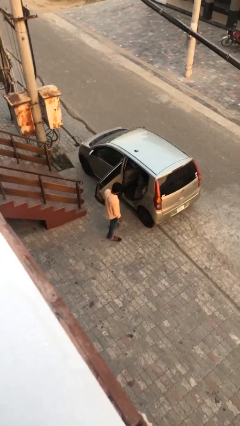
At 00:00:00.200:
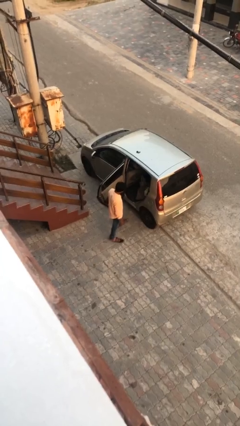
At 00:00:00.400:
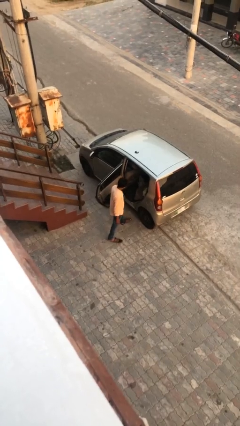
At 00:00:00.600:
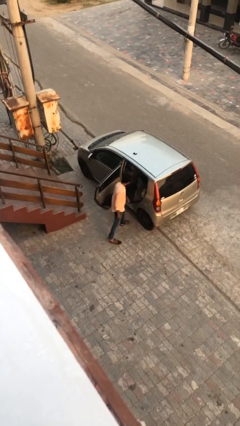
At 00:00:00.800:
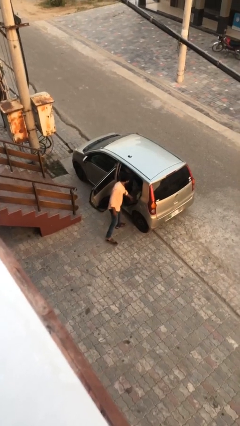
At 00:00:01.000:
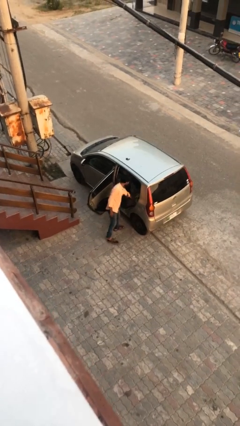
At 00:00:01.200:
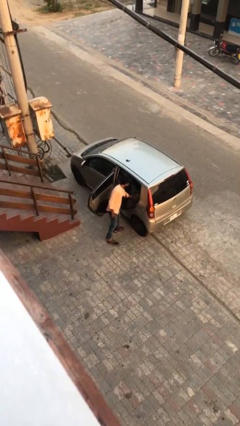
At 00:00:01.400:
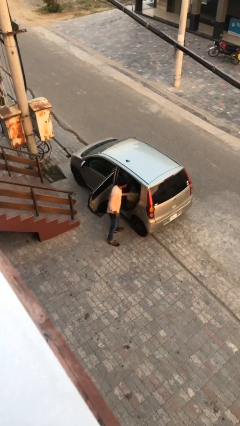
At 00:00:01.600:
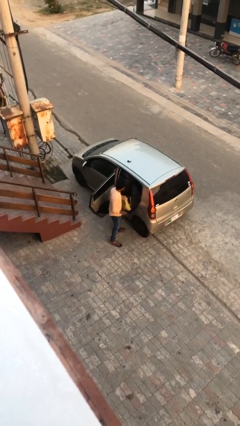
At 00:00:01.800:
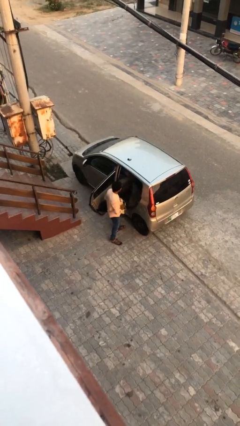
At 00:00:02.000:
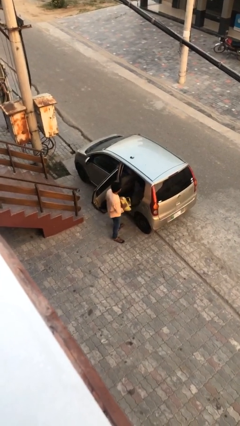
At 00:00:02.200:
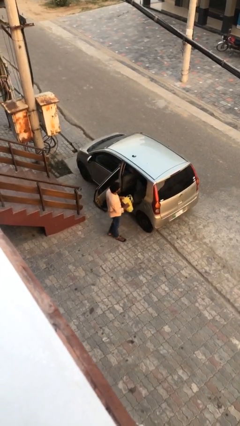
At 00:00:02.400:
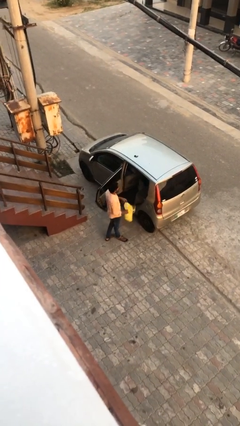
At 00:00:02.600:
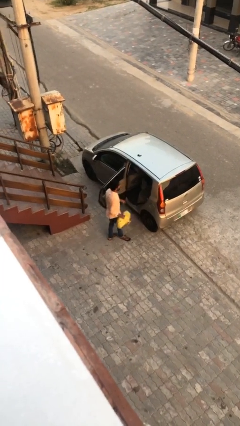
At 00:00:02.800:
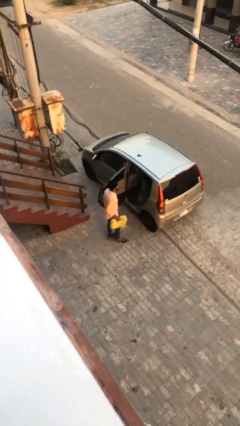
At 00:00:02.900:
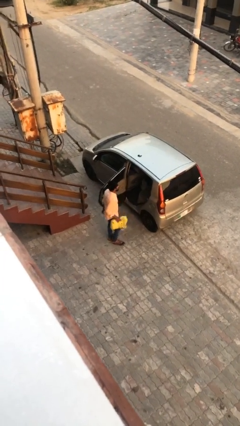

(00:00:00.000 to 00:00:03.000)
person unloads car

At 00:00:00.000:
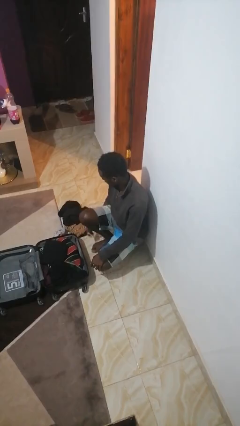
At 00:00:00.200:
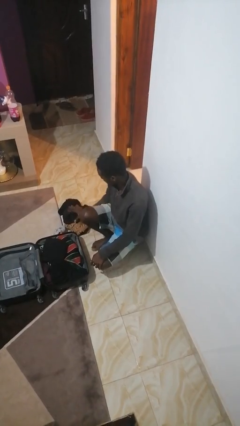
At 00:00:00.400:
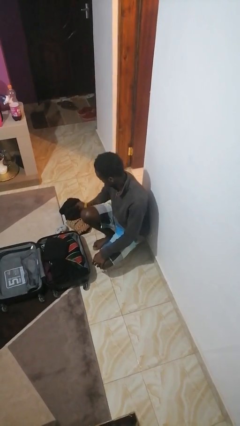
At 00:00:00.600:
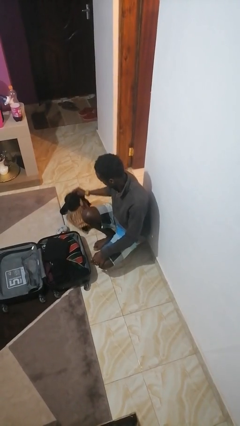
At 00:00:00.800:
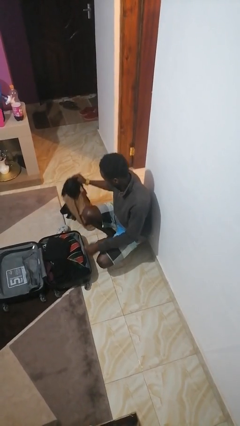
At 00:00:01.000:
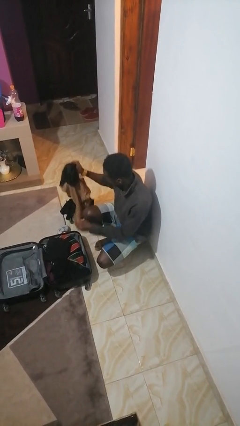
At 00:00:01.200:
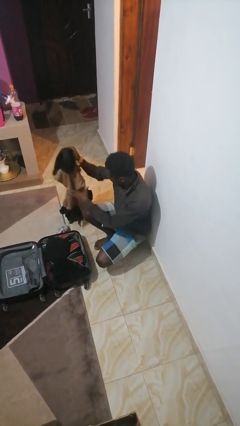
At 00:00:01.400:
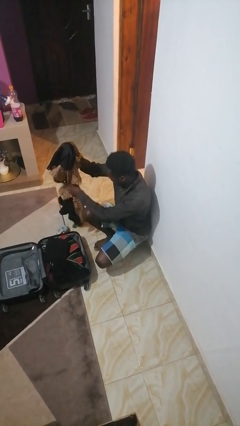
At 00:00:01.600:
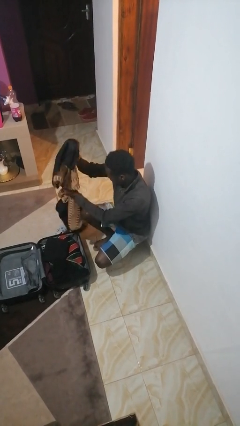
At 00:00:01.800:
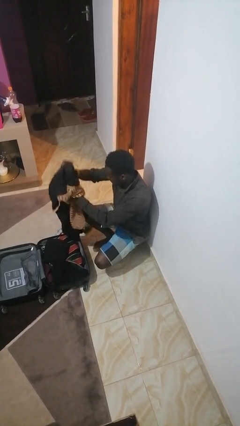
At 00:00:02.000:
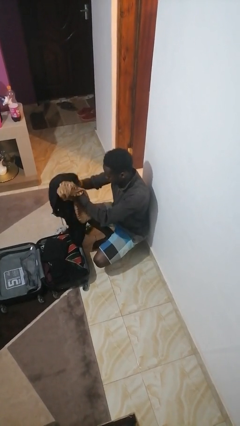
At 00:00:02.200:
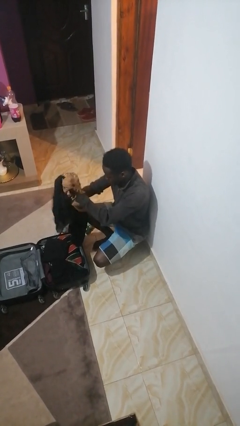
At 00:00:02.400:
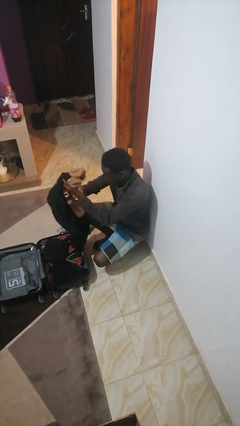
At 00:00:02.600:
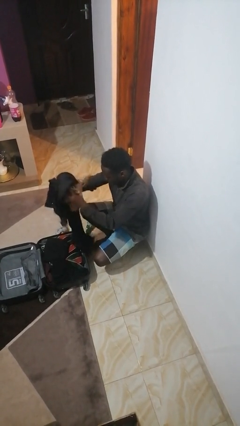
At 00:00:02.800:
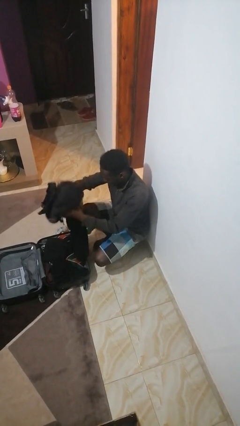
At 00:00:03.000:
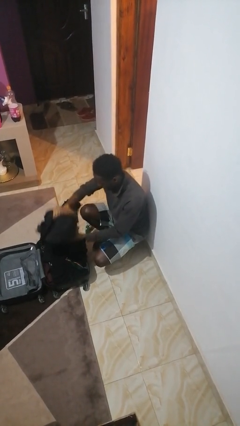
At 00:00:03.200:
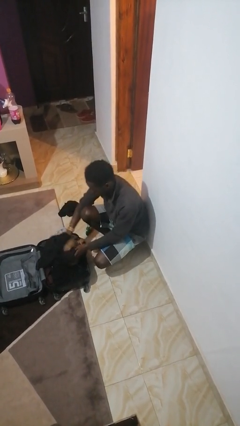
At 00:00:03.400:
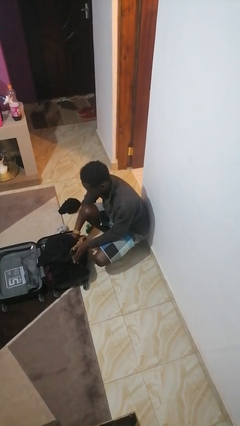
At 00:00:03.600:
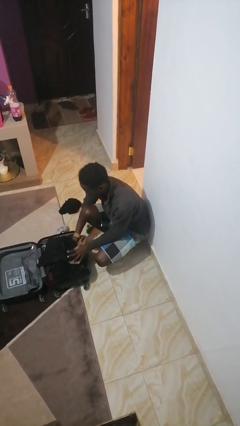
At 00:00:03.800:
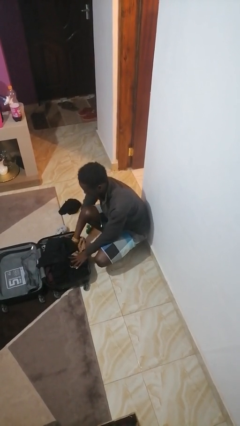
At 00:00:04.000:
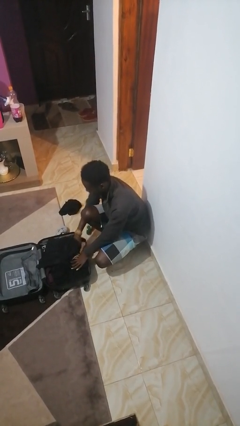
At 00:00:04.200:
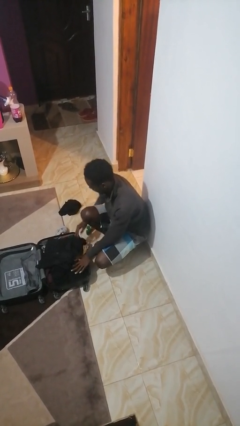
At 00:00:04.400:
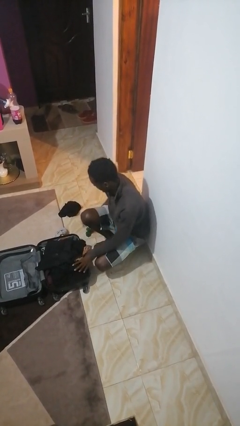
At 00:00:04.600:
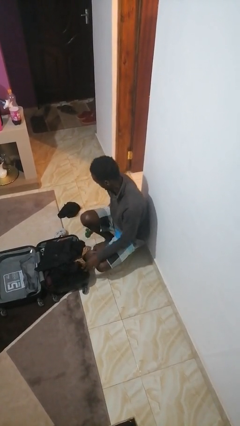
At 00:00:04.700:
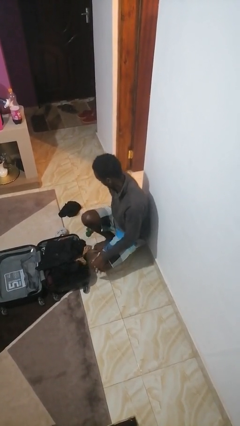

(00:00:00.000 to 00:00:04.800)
person loads clothes into suitcase

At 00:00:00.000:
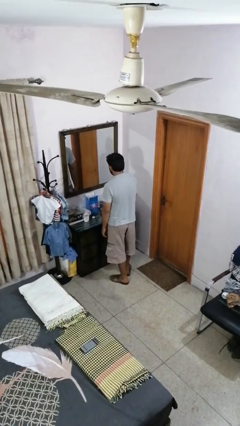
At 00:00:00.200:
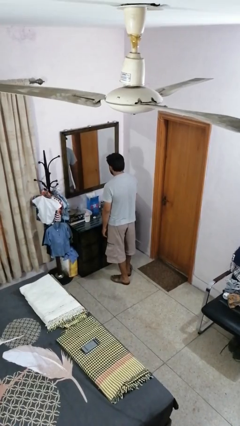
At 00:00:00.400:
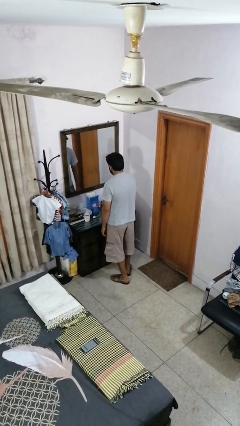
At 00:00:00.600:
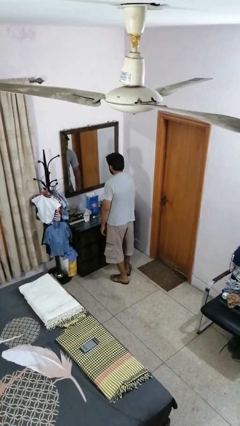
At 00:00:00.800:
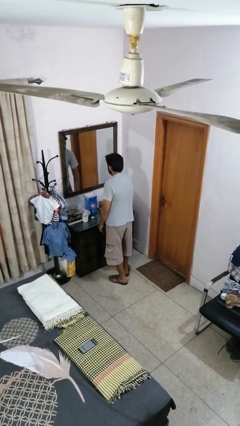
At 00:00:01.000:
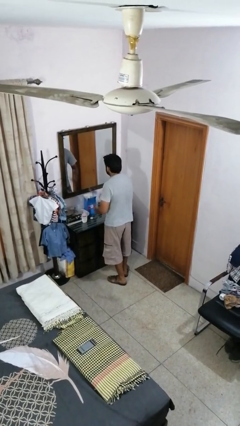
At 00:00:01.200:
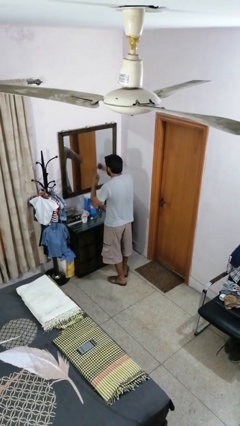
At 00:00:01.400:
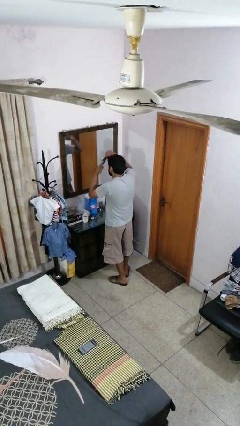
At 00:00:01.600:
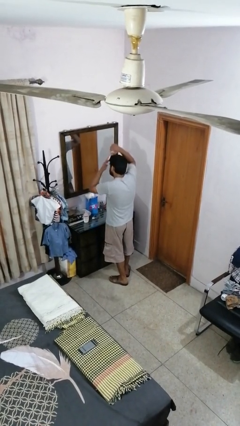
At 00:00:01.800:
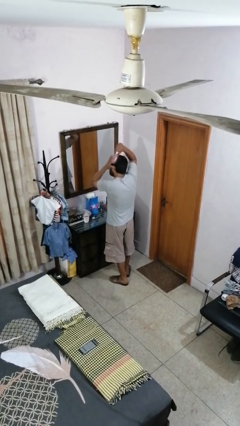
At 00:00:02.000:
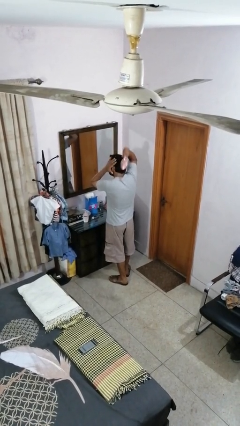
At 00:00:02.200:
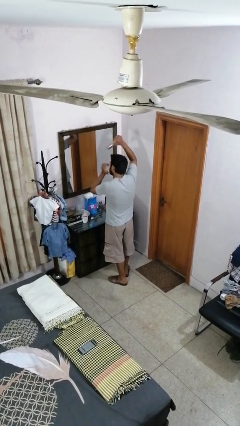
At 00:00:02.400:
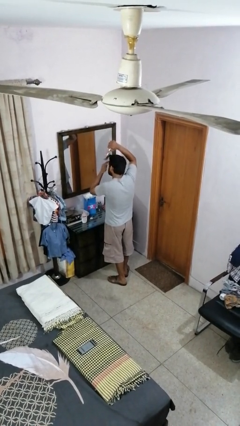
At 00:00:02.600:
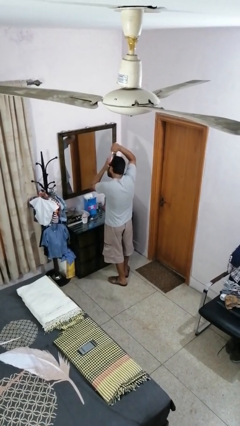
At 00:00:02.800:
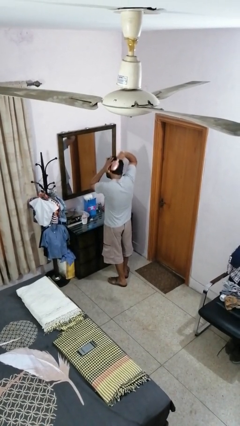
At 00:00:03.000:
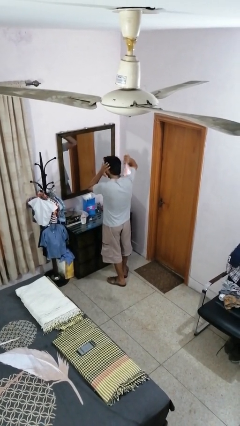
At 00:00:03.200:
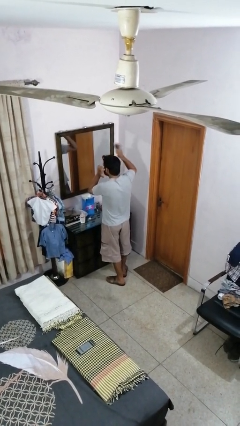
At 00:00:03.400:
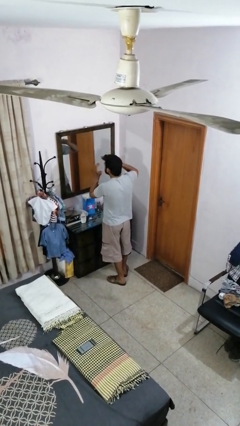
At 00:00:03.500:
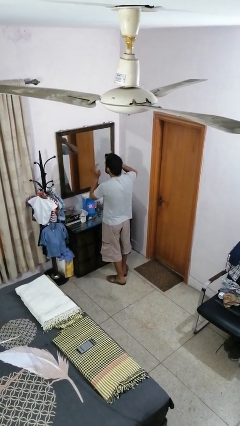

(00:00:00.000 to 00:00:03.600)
person brushes hair

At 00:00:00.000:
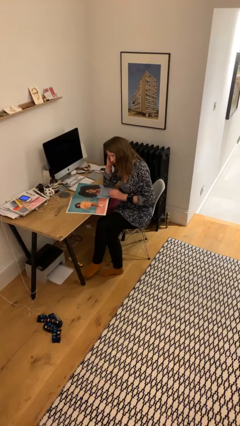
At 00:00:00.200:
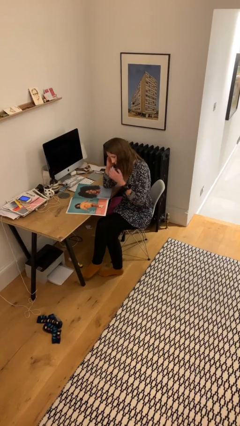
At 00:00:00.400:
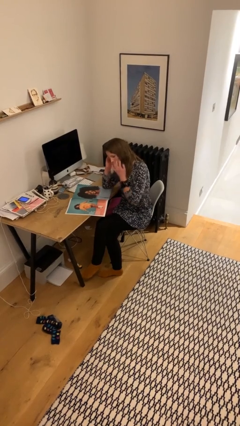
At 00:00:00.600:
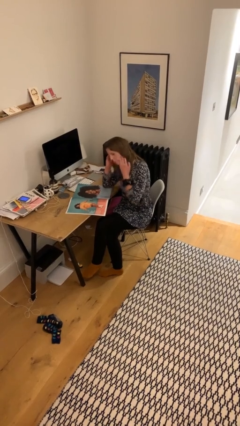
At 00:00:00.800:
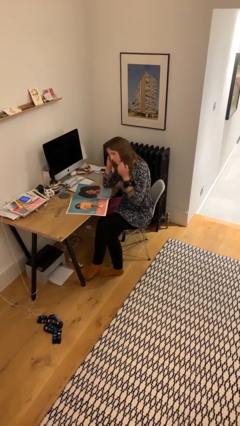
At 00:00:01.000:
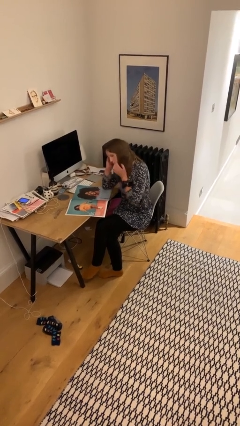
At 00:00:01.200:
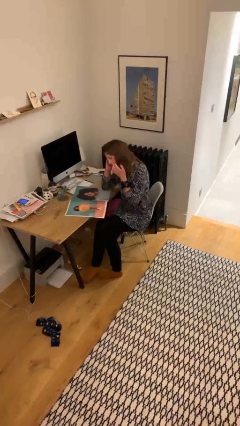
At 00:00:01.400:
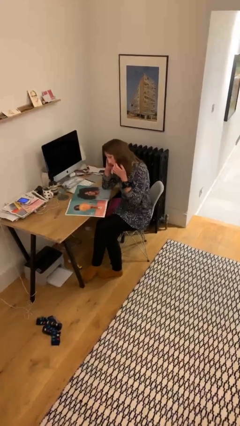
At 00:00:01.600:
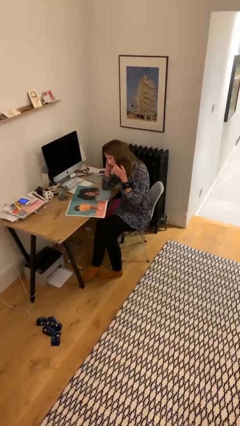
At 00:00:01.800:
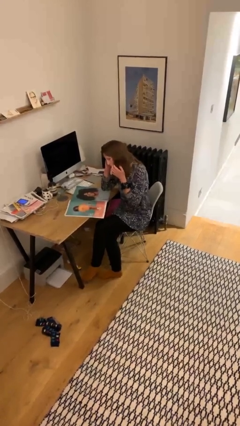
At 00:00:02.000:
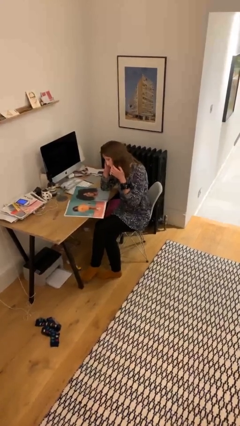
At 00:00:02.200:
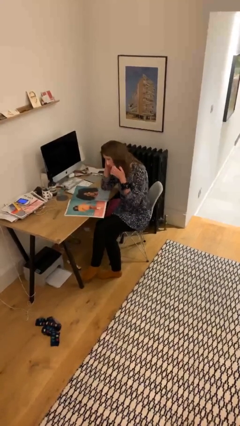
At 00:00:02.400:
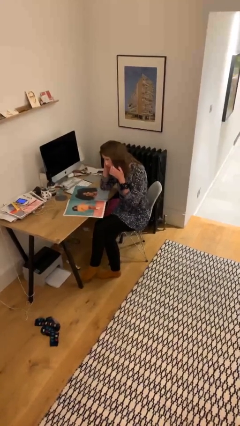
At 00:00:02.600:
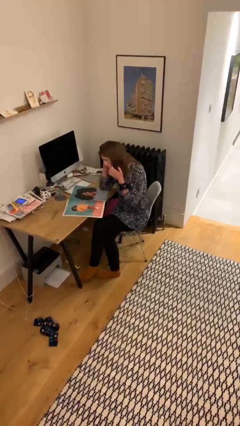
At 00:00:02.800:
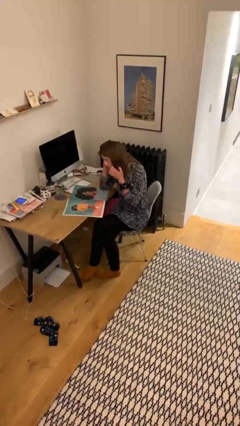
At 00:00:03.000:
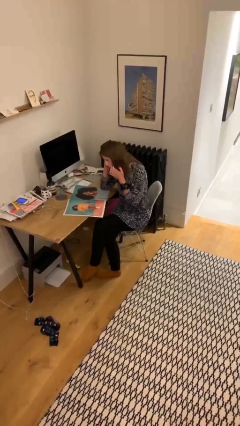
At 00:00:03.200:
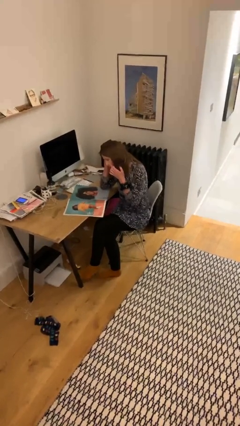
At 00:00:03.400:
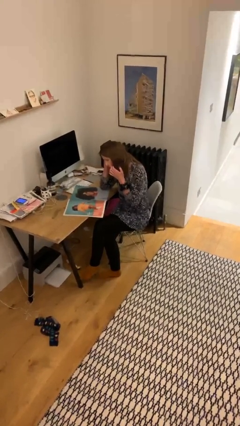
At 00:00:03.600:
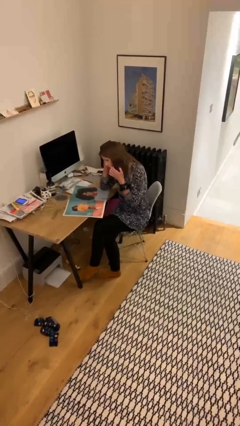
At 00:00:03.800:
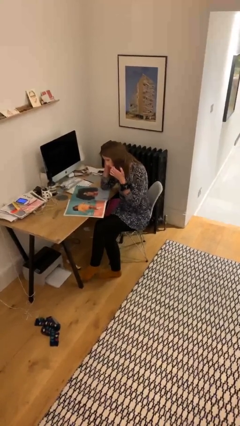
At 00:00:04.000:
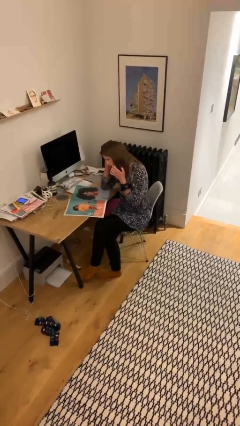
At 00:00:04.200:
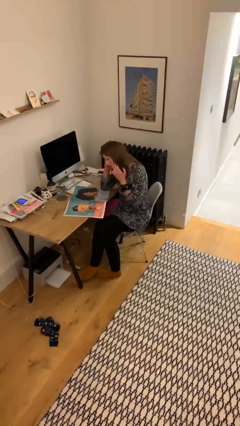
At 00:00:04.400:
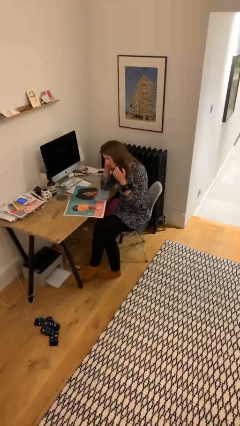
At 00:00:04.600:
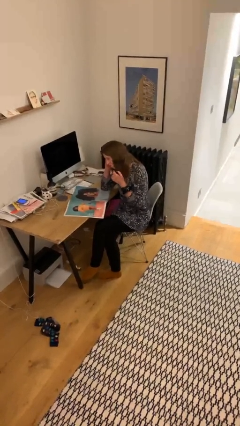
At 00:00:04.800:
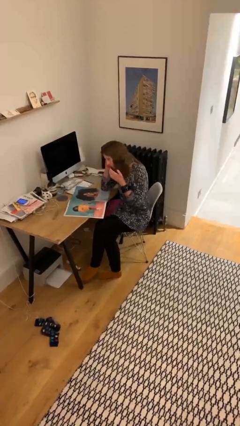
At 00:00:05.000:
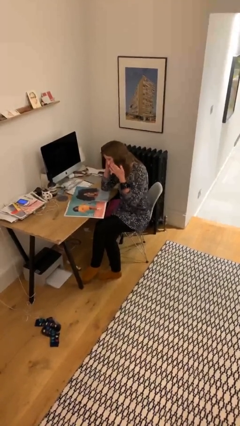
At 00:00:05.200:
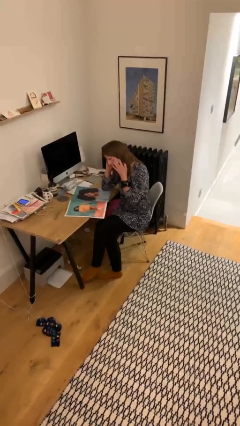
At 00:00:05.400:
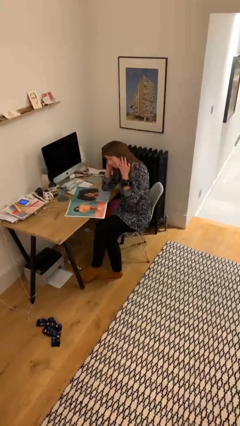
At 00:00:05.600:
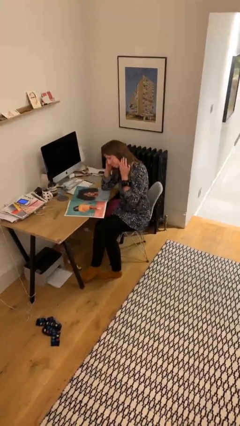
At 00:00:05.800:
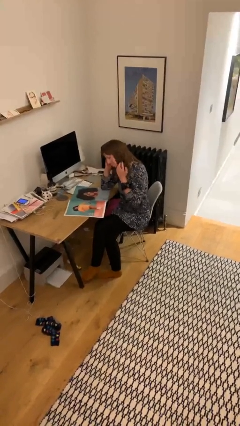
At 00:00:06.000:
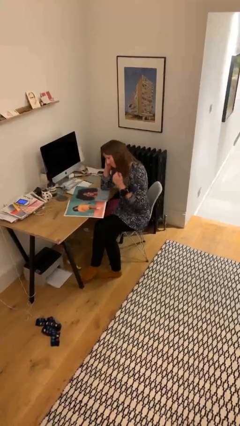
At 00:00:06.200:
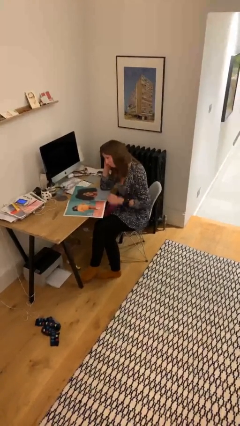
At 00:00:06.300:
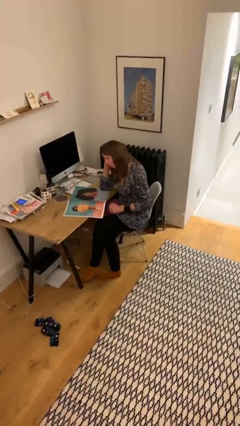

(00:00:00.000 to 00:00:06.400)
person reads document
